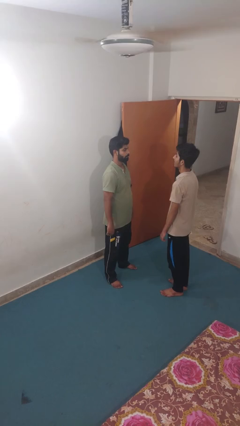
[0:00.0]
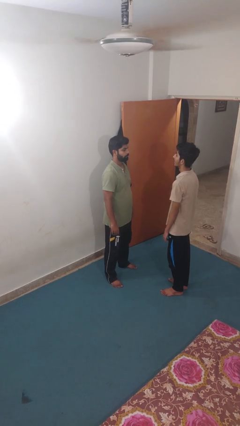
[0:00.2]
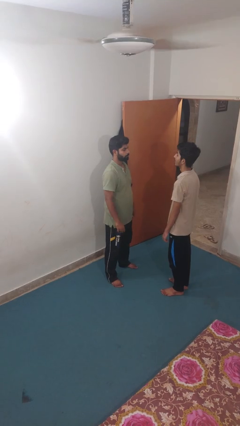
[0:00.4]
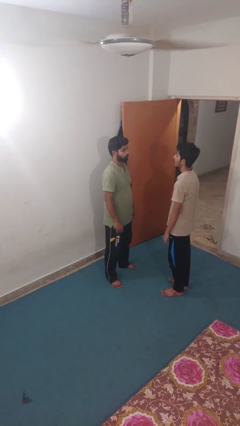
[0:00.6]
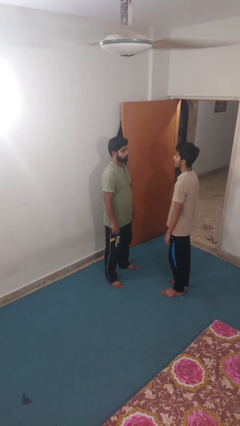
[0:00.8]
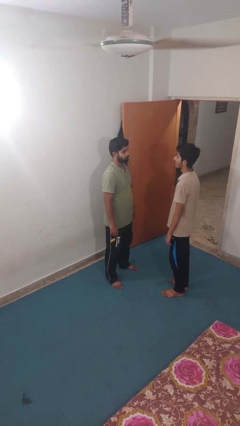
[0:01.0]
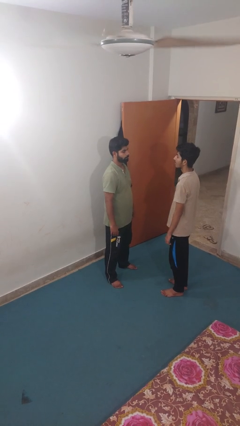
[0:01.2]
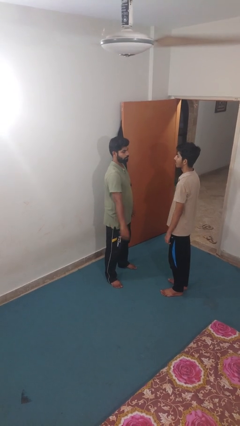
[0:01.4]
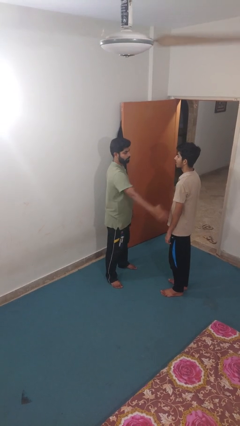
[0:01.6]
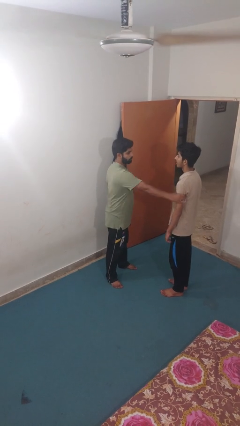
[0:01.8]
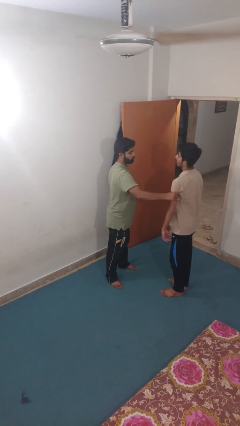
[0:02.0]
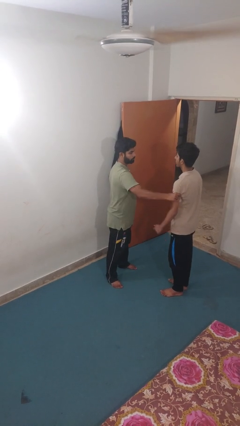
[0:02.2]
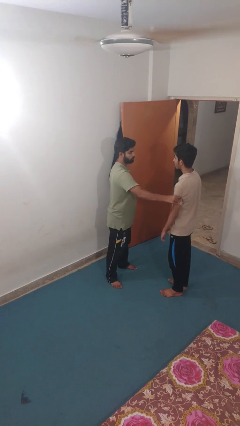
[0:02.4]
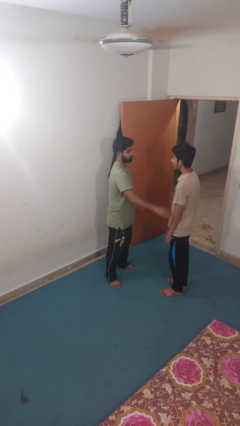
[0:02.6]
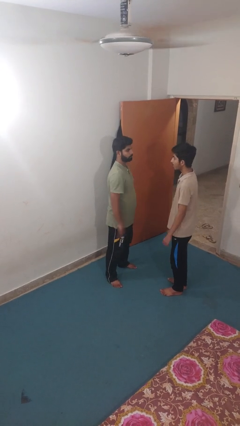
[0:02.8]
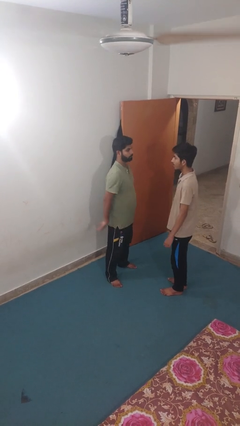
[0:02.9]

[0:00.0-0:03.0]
person grabs person by bicep

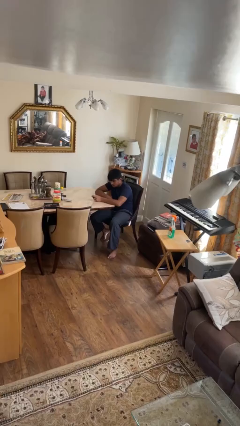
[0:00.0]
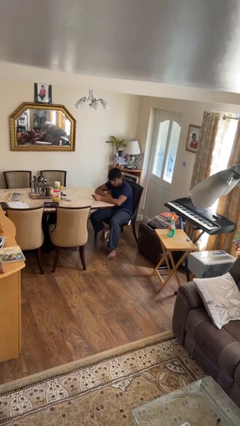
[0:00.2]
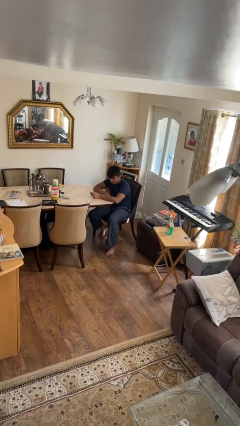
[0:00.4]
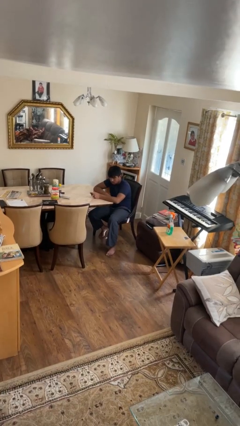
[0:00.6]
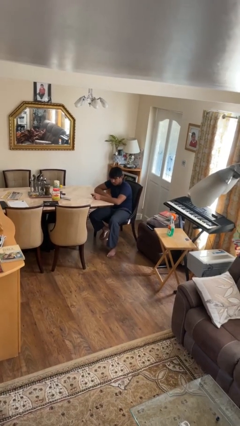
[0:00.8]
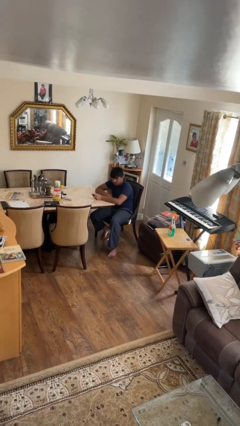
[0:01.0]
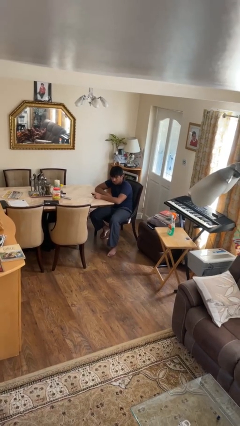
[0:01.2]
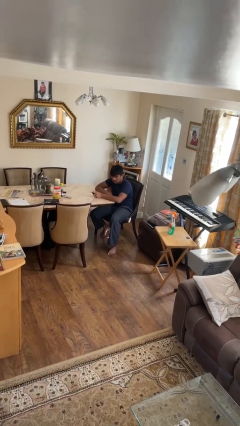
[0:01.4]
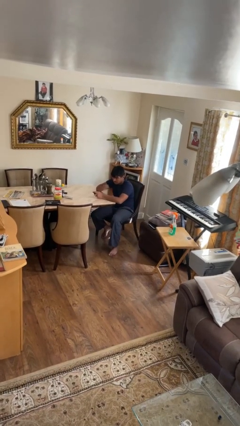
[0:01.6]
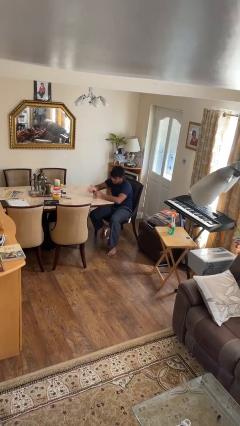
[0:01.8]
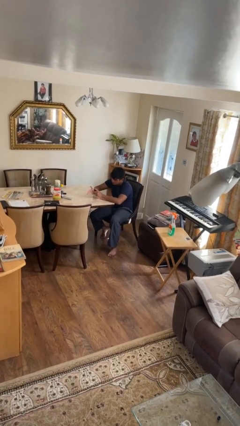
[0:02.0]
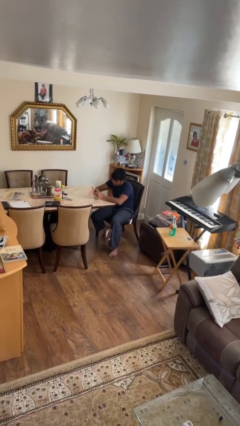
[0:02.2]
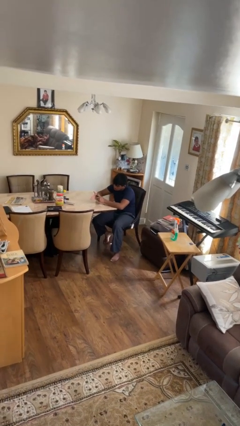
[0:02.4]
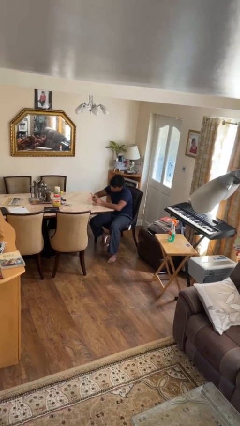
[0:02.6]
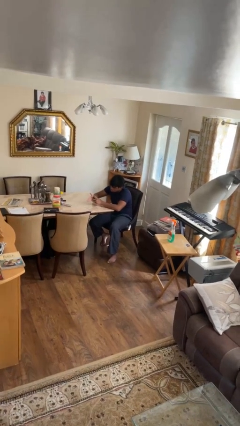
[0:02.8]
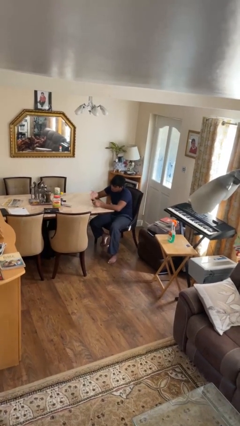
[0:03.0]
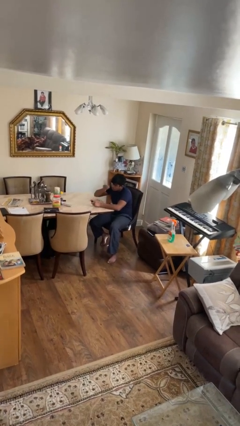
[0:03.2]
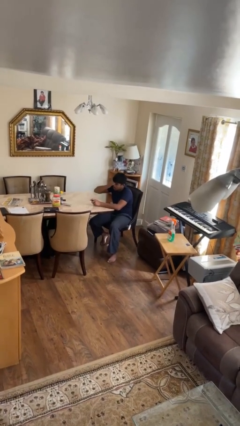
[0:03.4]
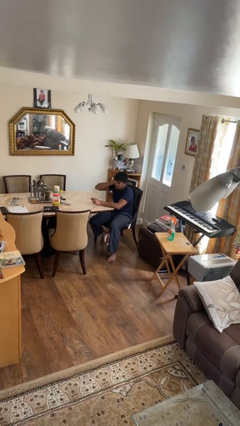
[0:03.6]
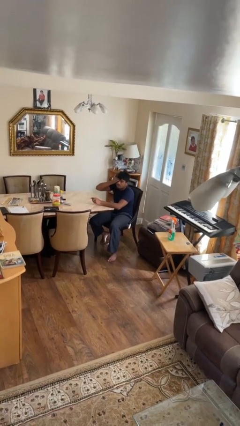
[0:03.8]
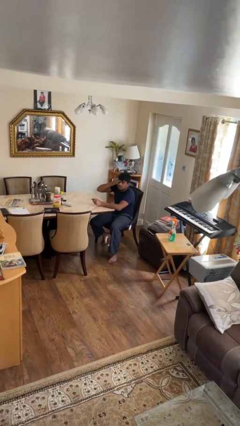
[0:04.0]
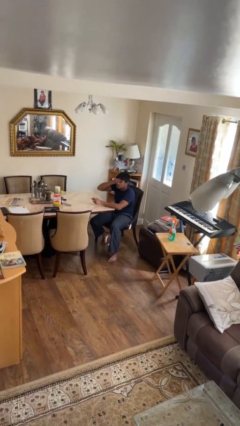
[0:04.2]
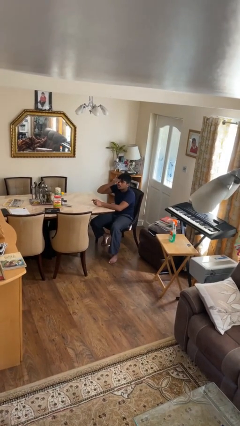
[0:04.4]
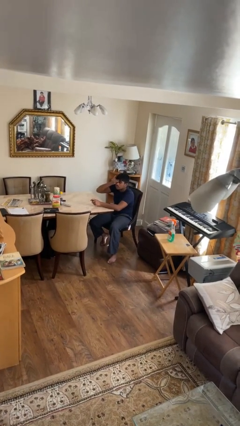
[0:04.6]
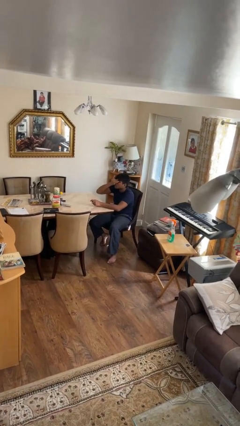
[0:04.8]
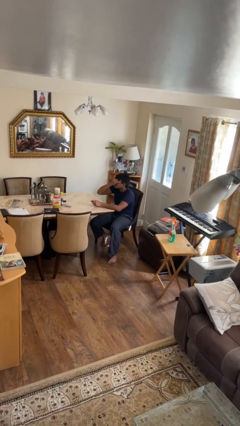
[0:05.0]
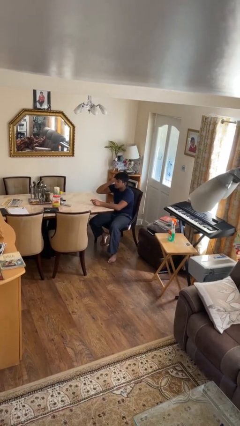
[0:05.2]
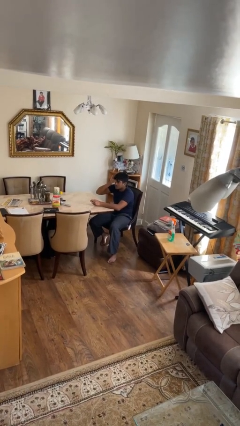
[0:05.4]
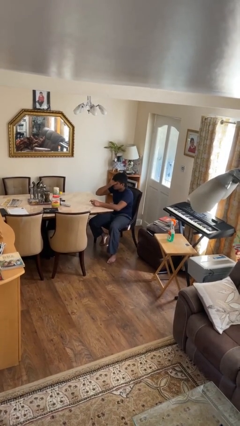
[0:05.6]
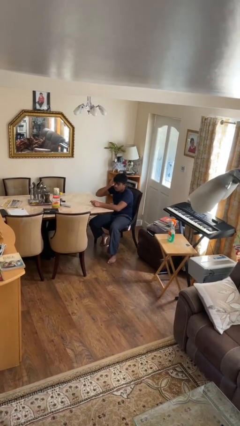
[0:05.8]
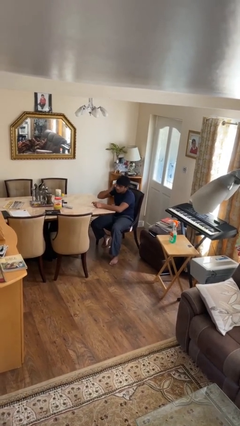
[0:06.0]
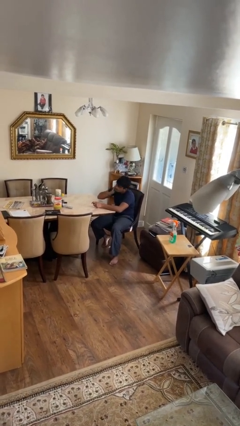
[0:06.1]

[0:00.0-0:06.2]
person applies foundation makeup

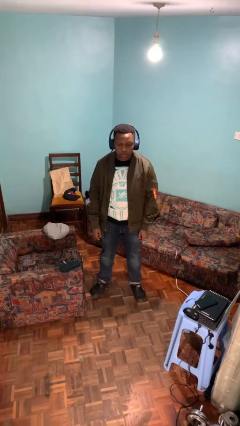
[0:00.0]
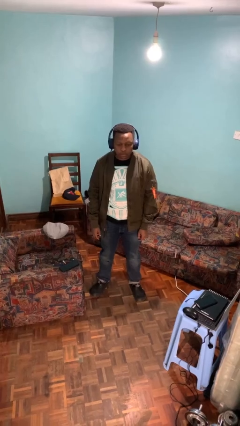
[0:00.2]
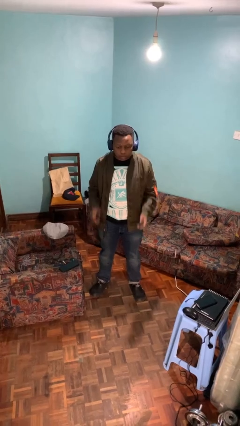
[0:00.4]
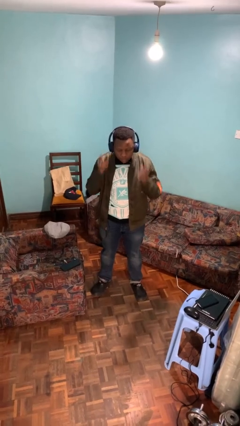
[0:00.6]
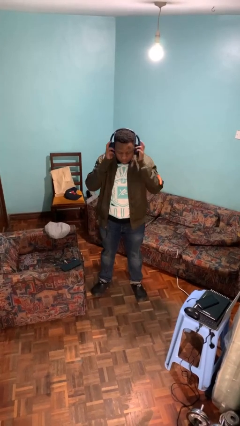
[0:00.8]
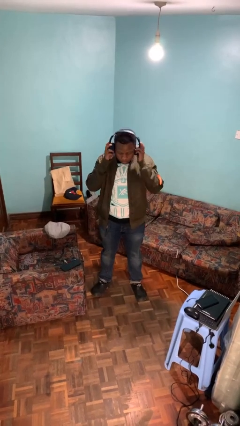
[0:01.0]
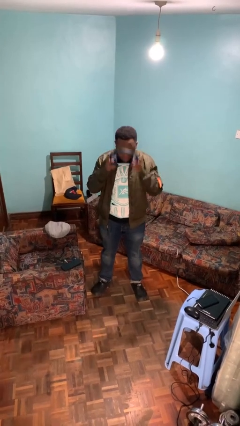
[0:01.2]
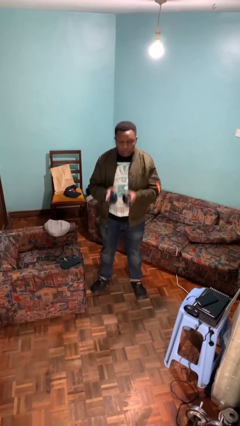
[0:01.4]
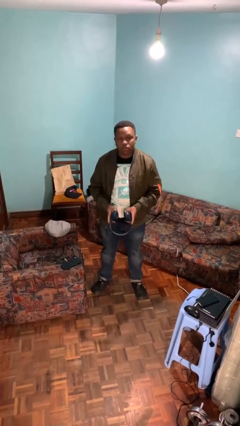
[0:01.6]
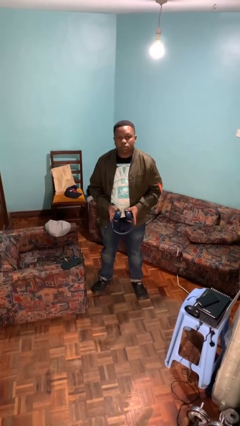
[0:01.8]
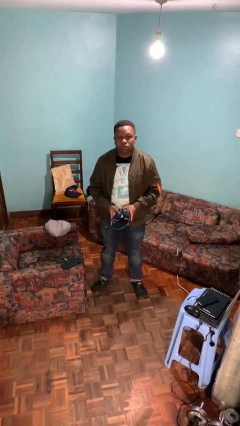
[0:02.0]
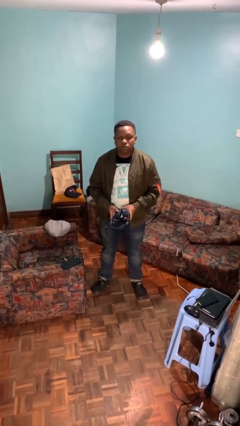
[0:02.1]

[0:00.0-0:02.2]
person takes off headphones

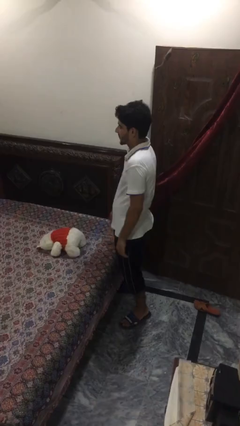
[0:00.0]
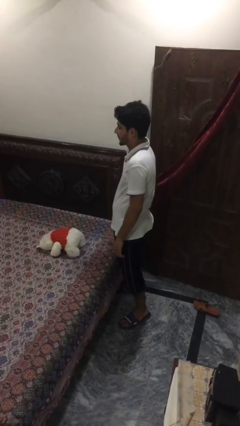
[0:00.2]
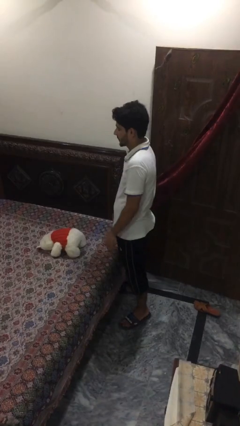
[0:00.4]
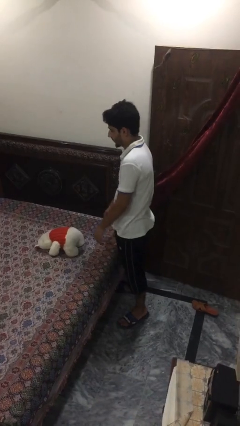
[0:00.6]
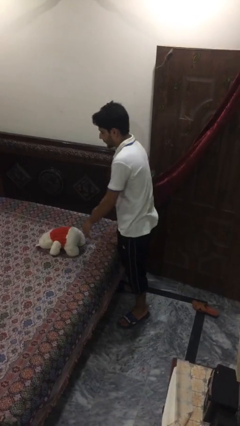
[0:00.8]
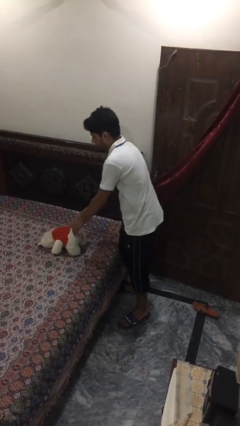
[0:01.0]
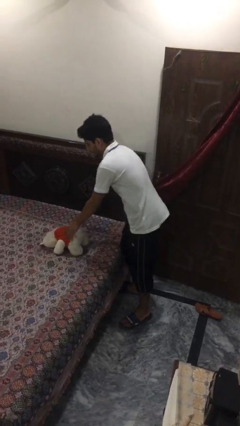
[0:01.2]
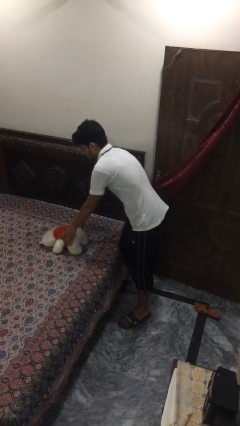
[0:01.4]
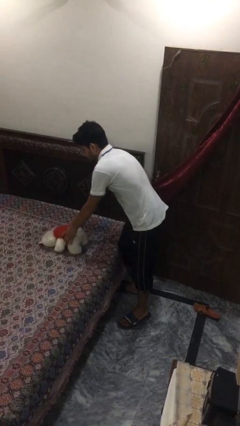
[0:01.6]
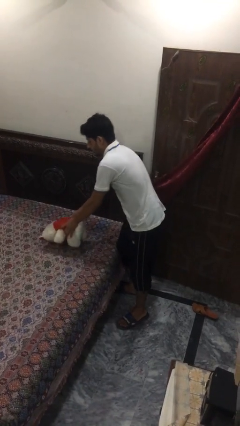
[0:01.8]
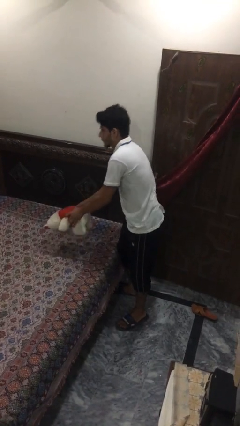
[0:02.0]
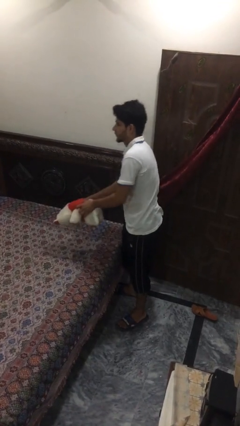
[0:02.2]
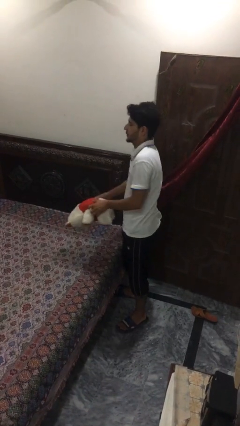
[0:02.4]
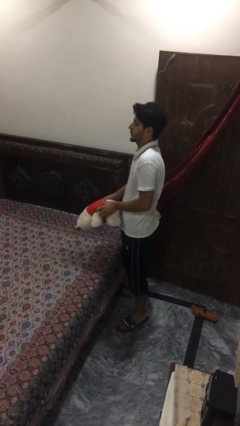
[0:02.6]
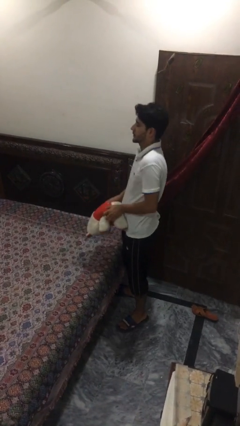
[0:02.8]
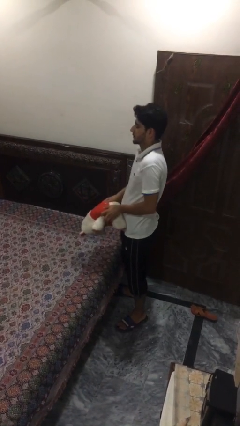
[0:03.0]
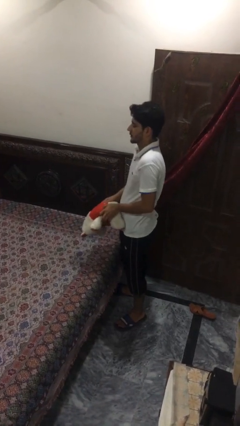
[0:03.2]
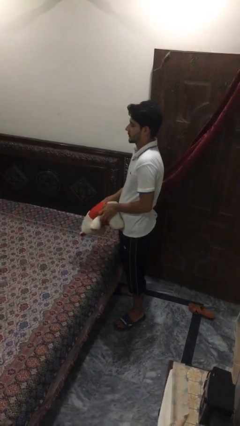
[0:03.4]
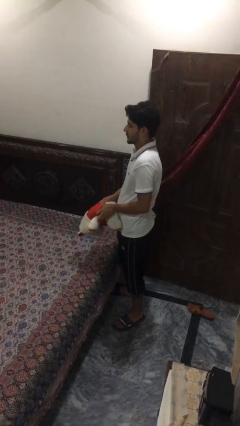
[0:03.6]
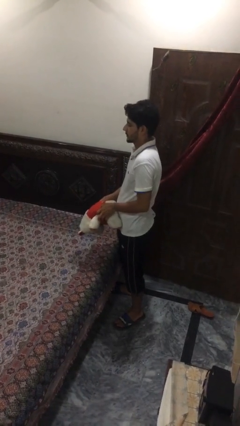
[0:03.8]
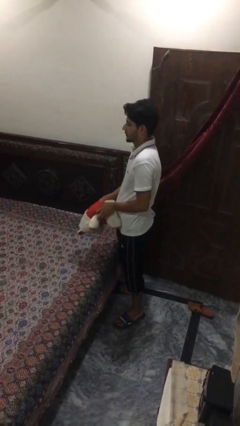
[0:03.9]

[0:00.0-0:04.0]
person picks up object from bed

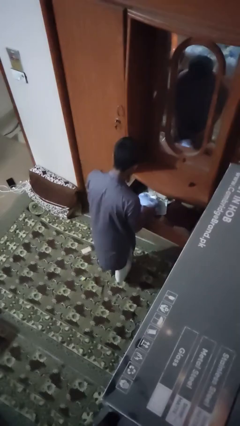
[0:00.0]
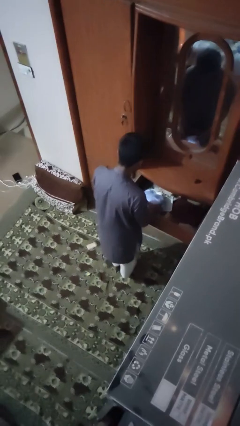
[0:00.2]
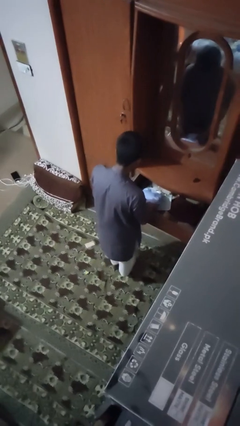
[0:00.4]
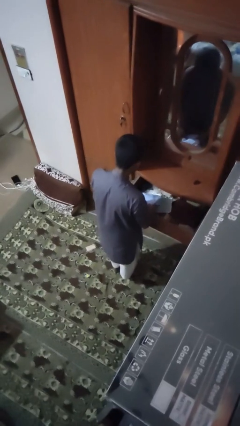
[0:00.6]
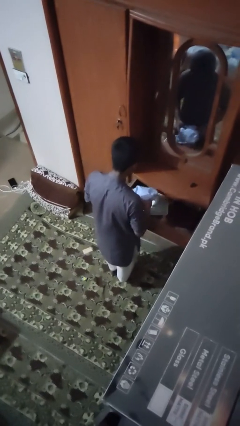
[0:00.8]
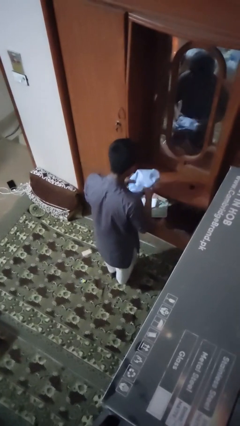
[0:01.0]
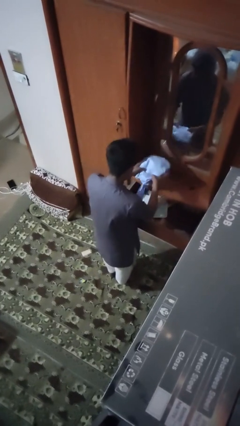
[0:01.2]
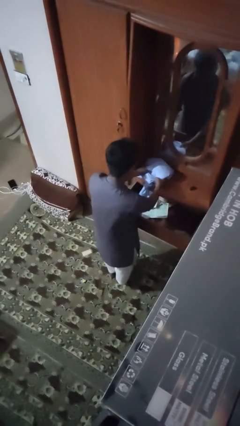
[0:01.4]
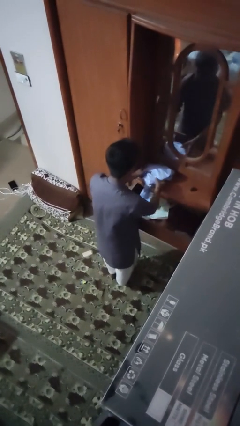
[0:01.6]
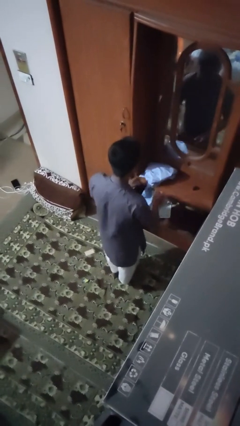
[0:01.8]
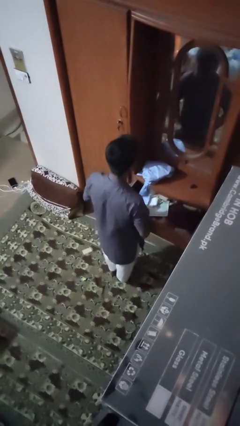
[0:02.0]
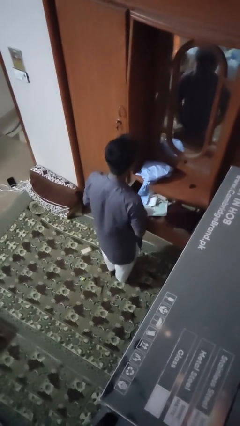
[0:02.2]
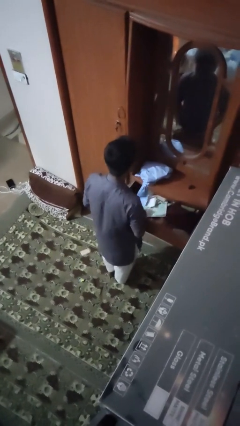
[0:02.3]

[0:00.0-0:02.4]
person takes clothes from dresser
